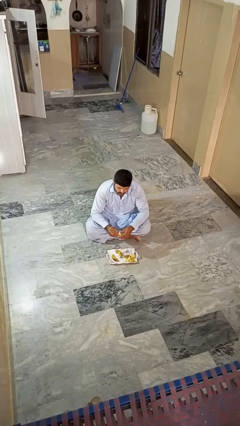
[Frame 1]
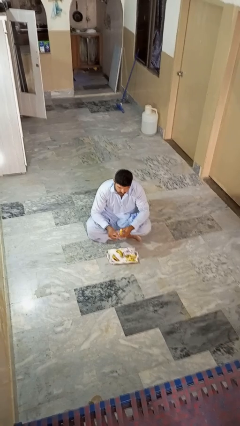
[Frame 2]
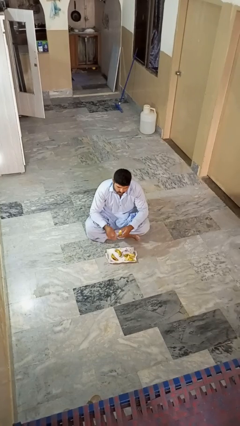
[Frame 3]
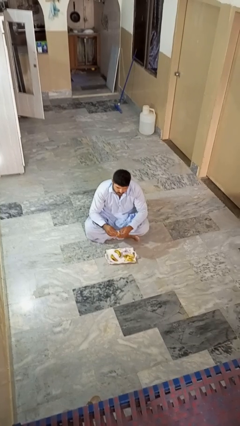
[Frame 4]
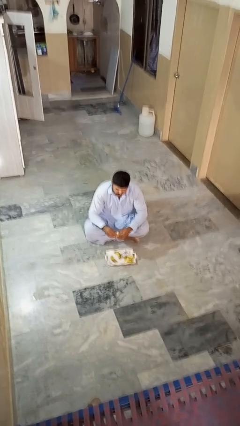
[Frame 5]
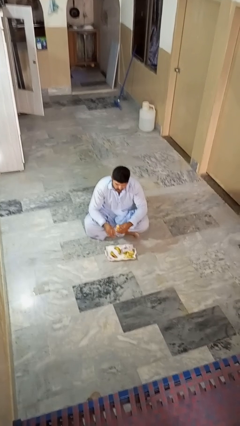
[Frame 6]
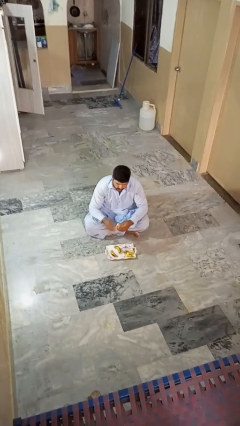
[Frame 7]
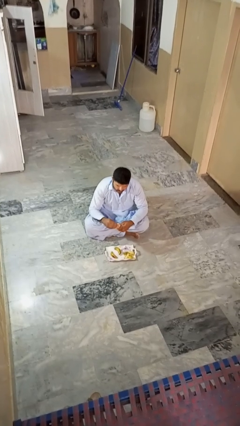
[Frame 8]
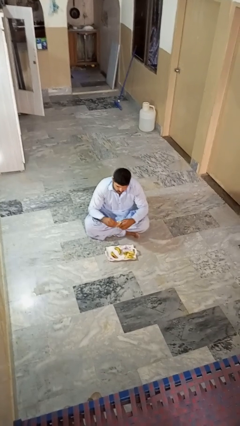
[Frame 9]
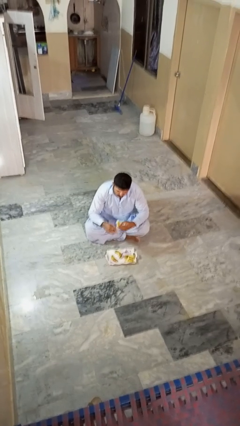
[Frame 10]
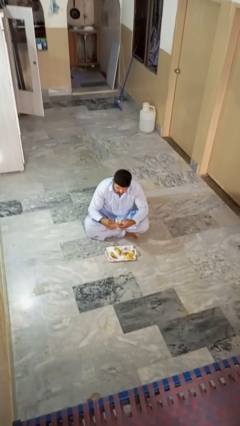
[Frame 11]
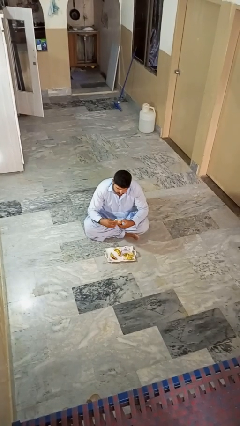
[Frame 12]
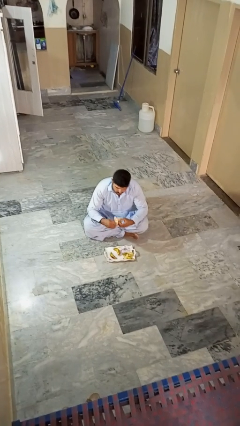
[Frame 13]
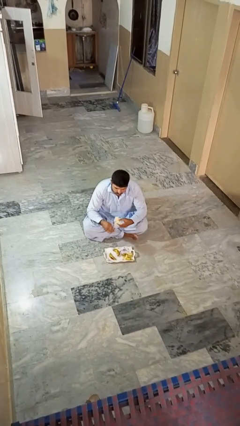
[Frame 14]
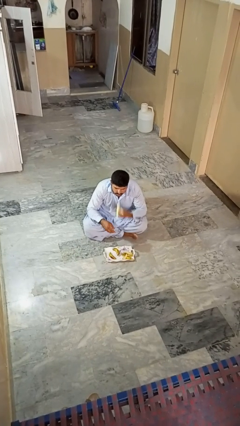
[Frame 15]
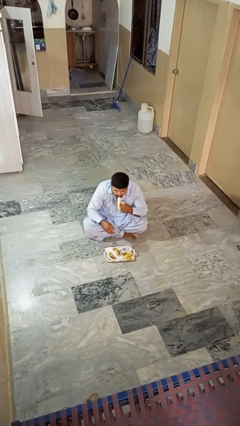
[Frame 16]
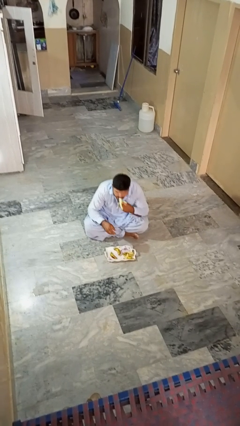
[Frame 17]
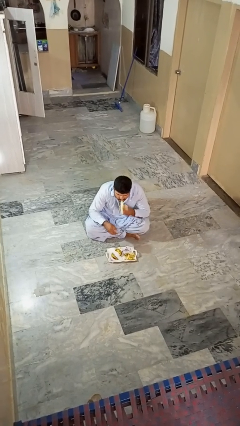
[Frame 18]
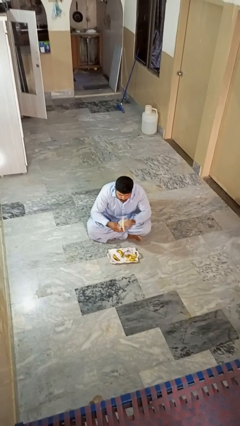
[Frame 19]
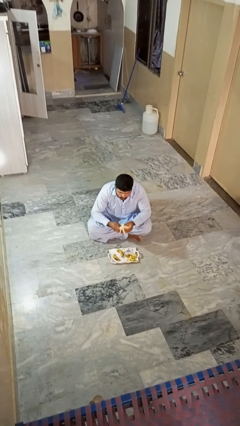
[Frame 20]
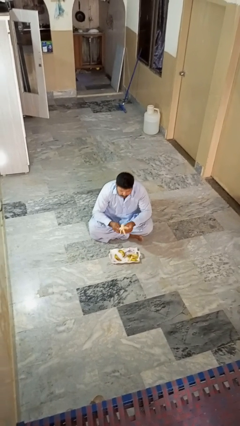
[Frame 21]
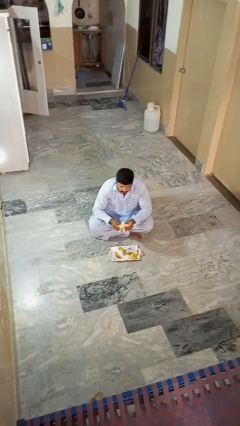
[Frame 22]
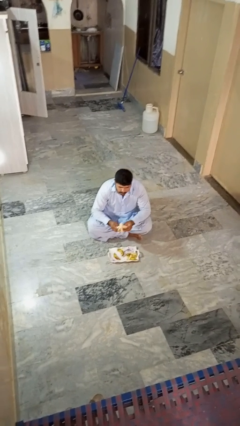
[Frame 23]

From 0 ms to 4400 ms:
person eats banana

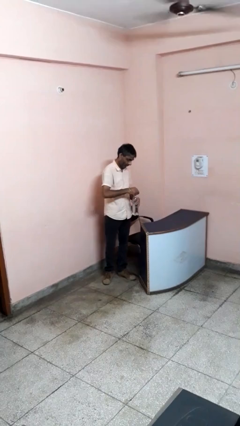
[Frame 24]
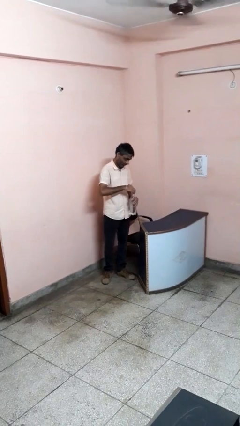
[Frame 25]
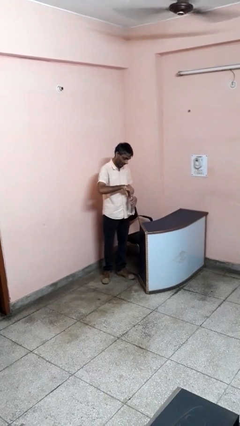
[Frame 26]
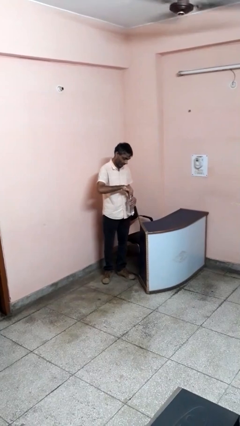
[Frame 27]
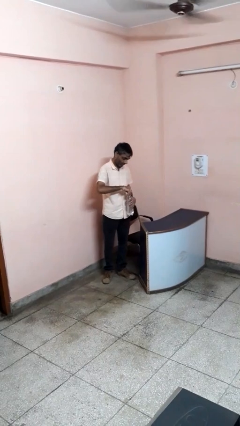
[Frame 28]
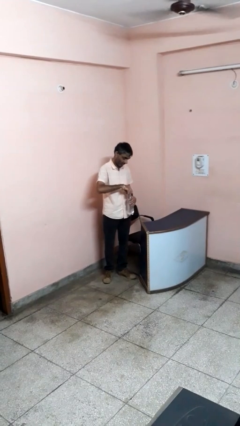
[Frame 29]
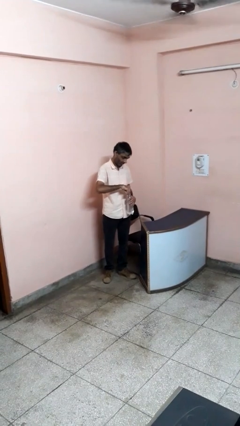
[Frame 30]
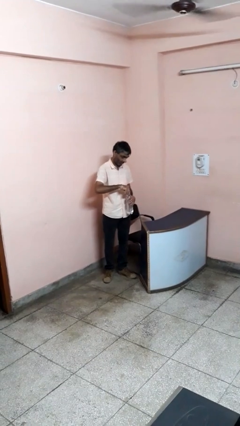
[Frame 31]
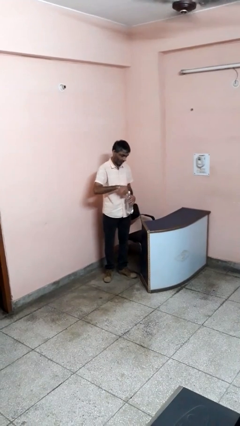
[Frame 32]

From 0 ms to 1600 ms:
person screws lid to bottle

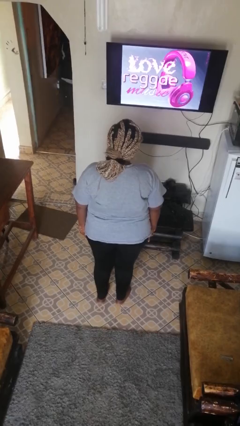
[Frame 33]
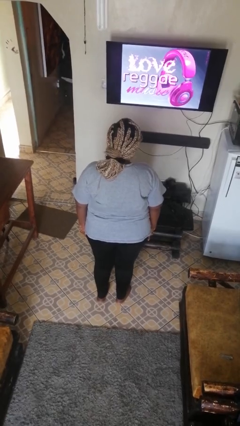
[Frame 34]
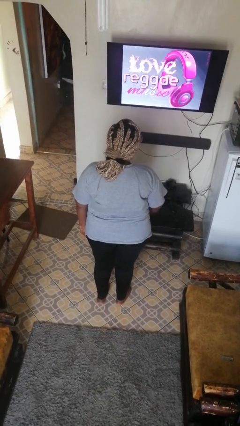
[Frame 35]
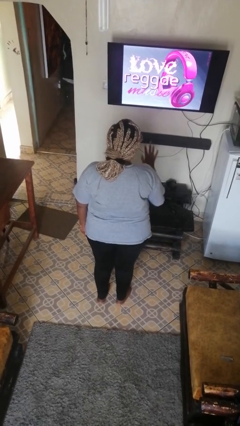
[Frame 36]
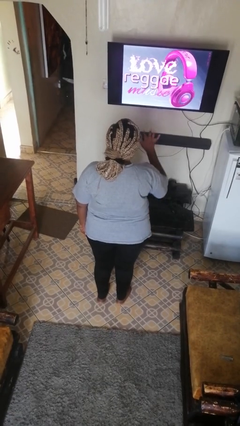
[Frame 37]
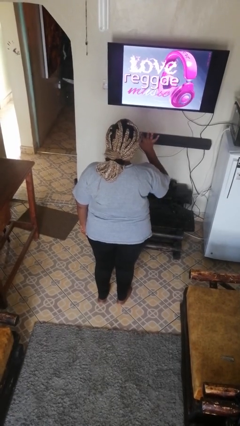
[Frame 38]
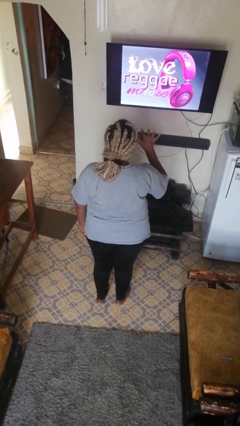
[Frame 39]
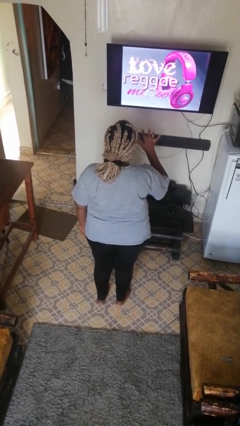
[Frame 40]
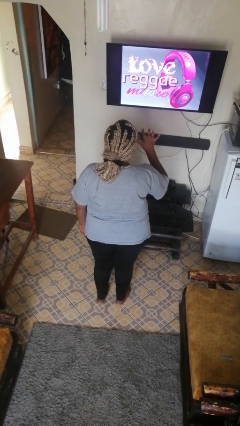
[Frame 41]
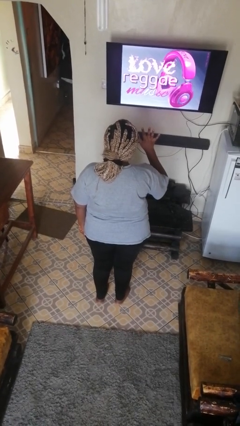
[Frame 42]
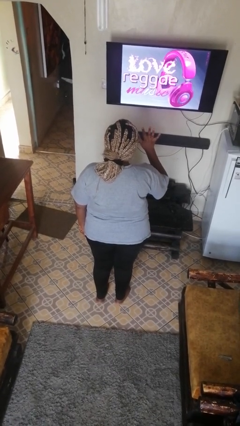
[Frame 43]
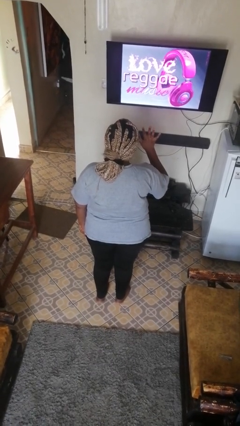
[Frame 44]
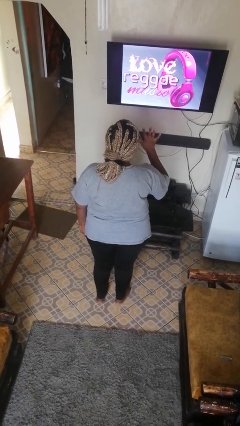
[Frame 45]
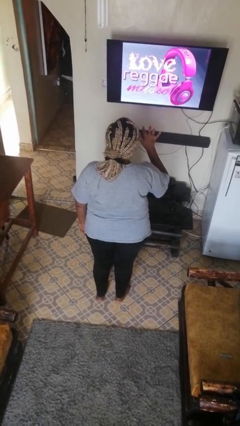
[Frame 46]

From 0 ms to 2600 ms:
person gestures stop

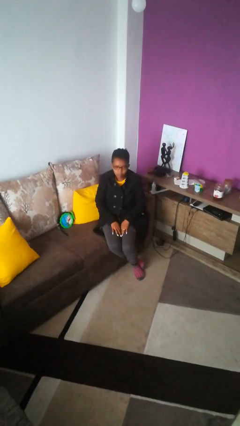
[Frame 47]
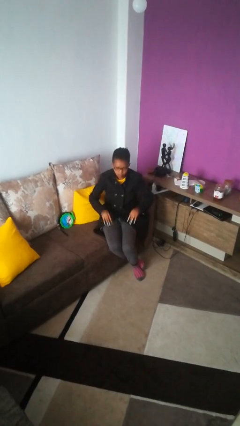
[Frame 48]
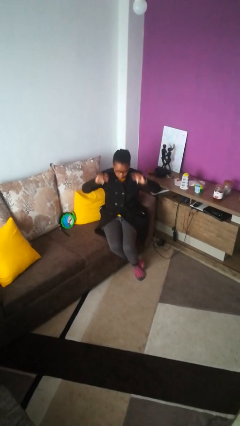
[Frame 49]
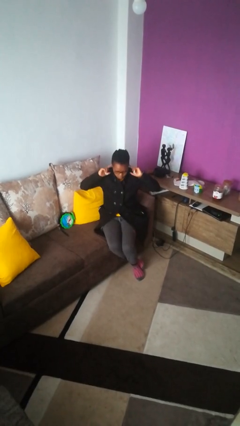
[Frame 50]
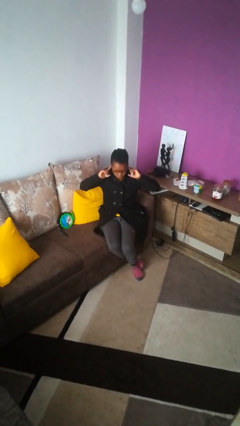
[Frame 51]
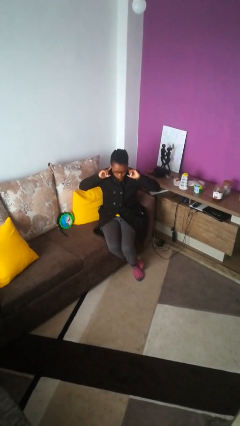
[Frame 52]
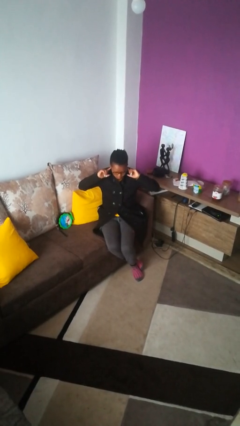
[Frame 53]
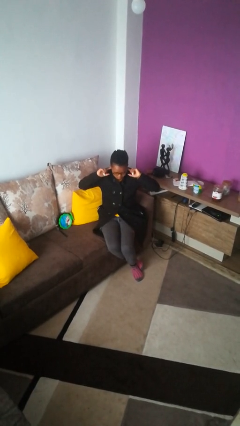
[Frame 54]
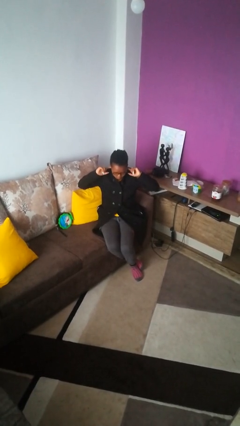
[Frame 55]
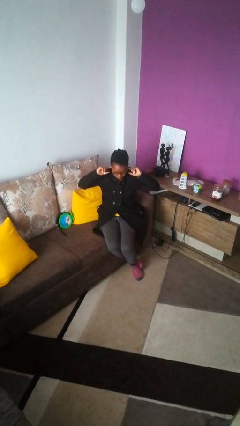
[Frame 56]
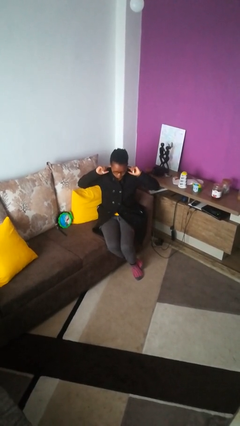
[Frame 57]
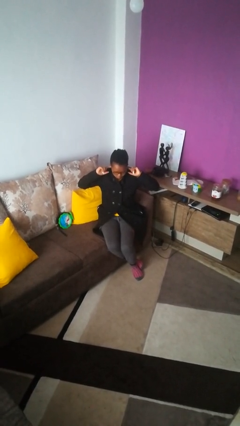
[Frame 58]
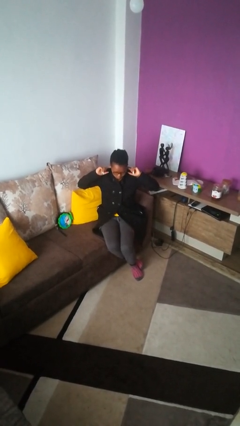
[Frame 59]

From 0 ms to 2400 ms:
person puts fingers in ear

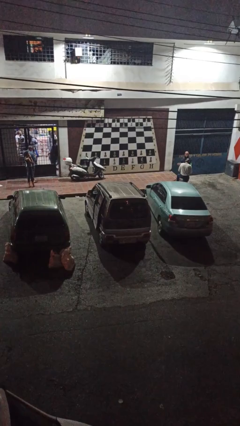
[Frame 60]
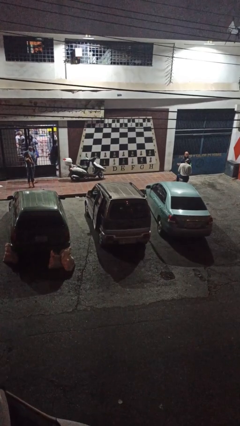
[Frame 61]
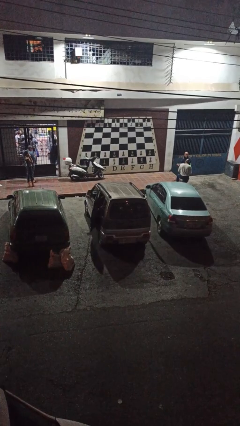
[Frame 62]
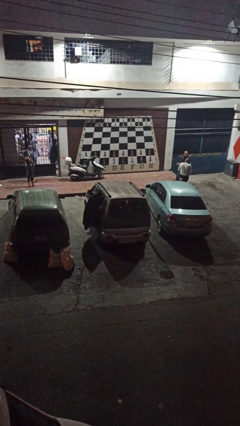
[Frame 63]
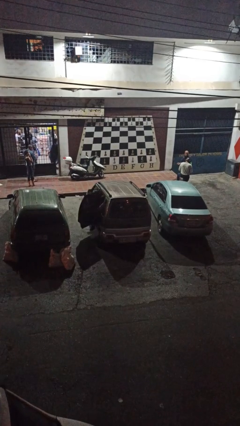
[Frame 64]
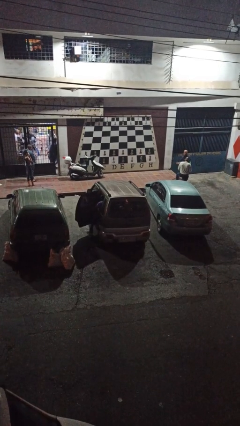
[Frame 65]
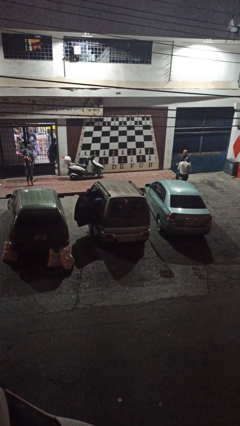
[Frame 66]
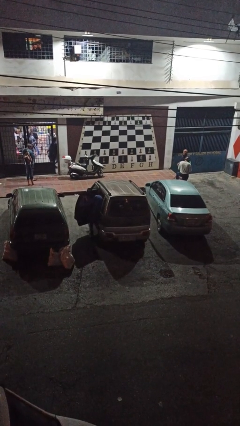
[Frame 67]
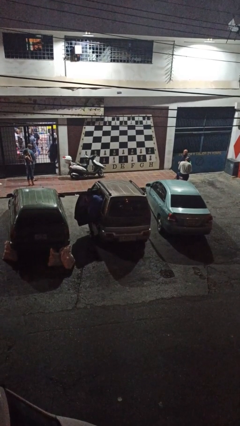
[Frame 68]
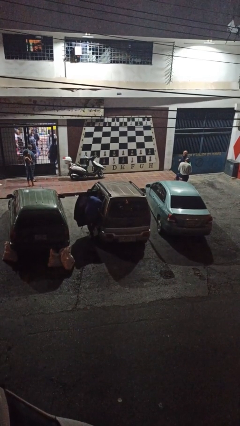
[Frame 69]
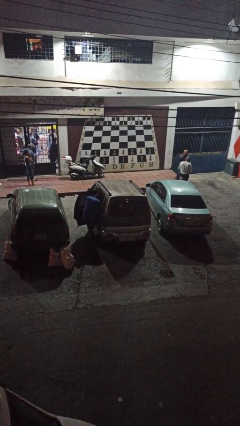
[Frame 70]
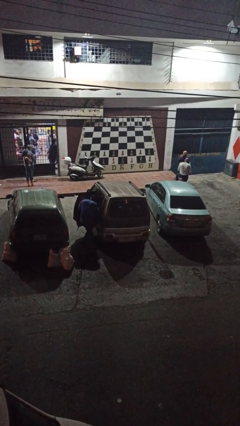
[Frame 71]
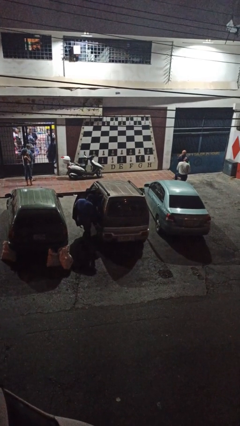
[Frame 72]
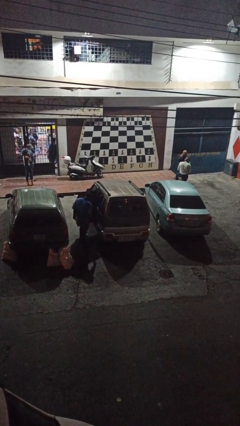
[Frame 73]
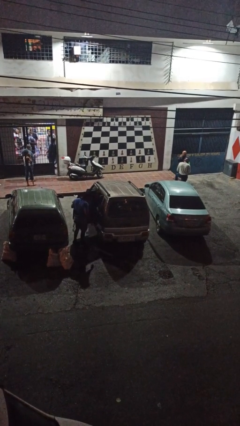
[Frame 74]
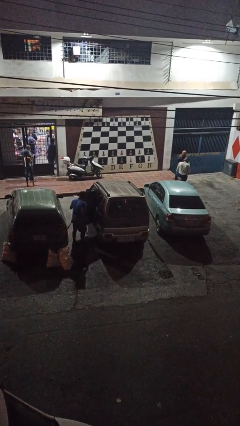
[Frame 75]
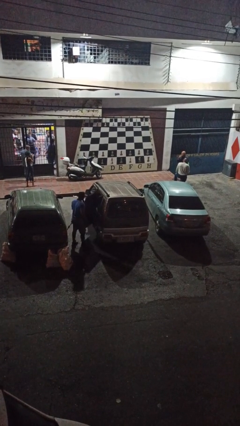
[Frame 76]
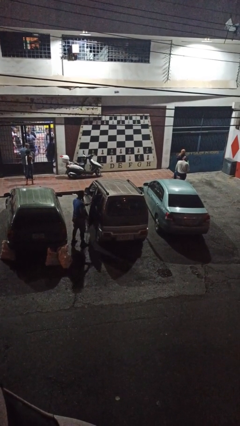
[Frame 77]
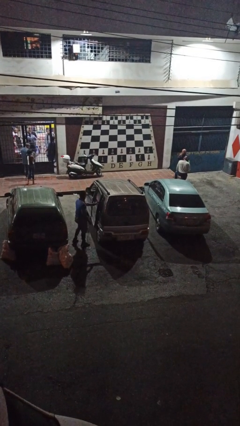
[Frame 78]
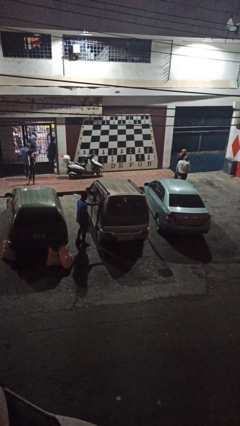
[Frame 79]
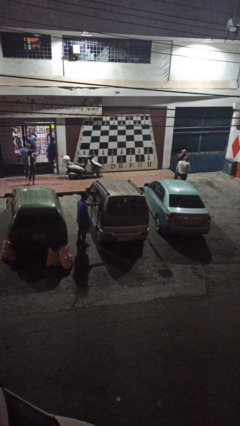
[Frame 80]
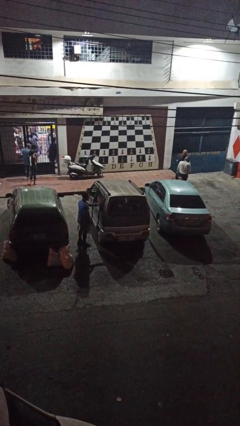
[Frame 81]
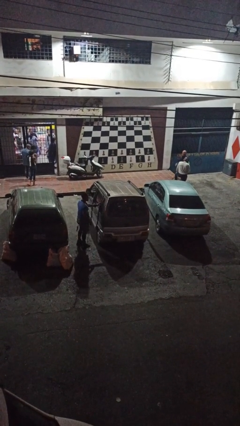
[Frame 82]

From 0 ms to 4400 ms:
car drops off person

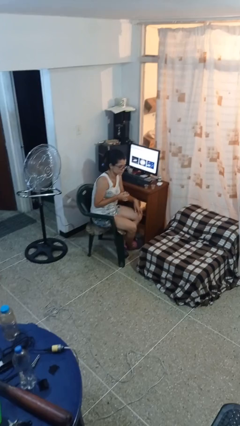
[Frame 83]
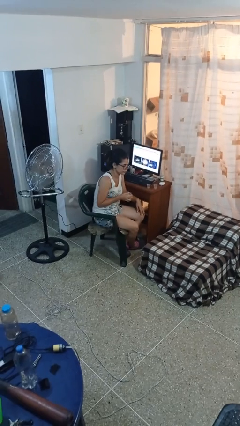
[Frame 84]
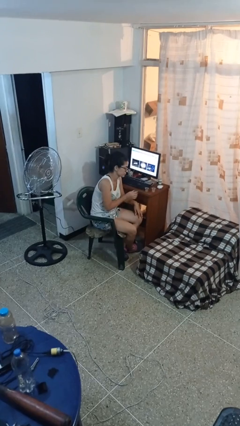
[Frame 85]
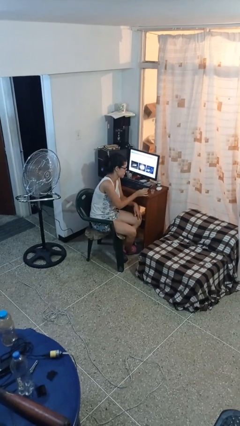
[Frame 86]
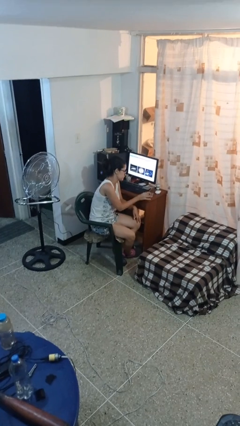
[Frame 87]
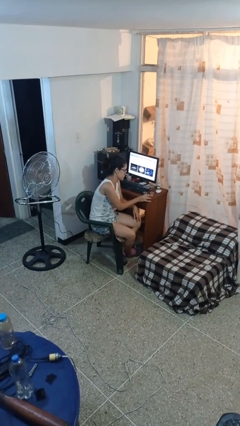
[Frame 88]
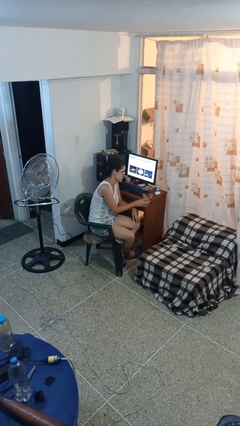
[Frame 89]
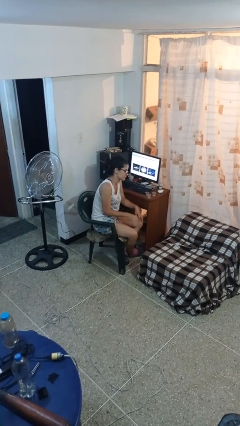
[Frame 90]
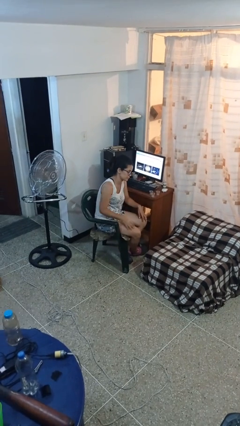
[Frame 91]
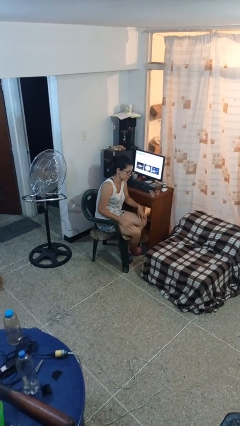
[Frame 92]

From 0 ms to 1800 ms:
person puts down object on table
